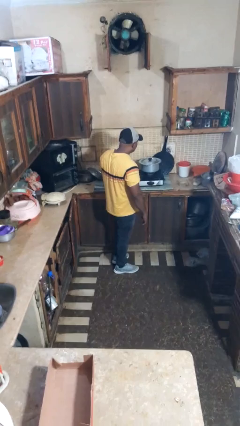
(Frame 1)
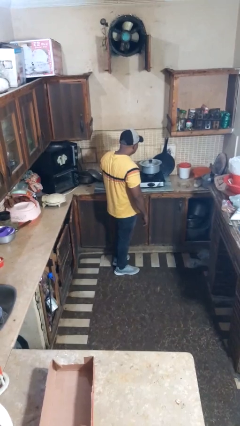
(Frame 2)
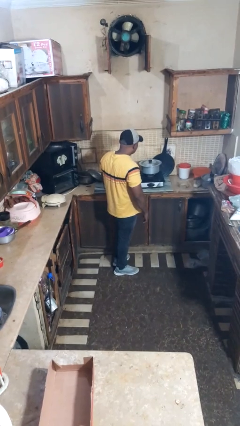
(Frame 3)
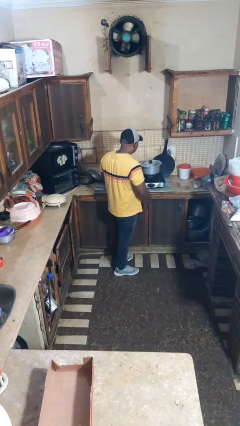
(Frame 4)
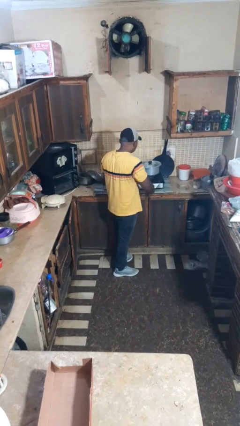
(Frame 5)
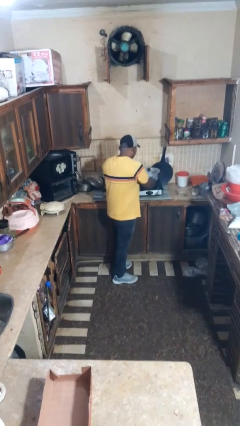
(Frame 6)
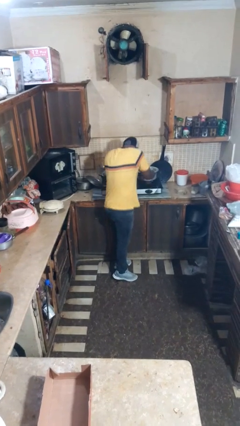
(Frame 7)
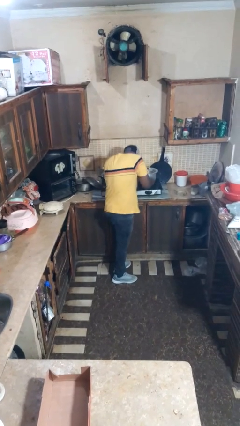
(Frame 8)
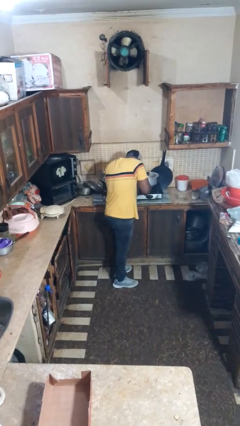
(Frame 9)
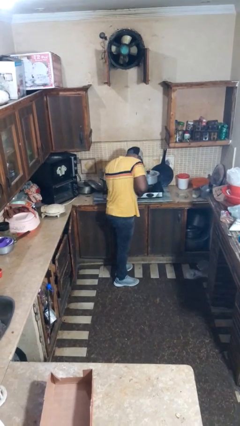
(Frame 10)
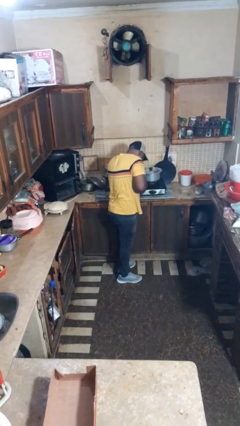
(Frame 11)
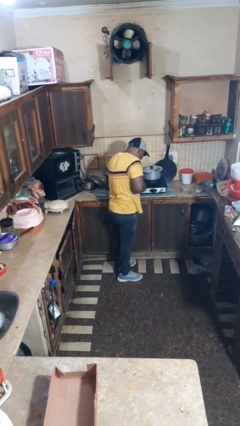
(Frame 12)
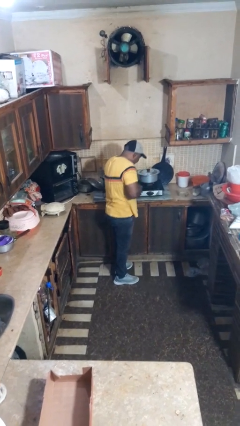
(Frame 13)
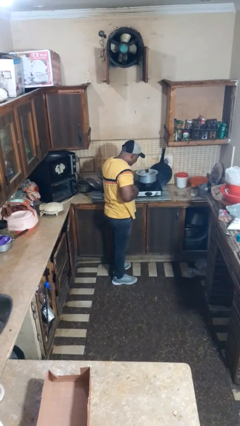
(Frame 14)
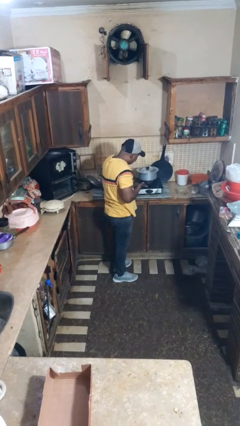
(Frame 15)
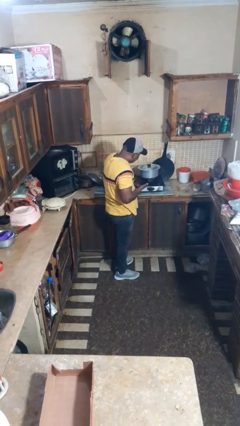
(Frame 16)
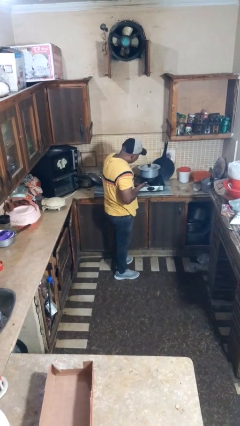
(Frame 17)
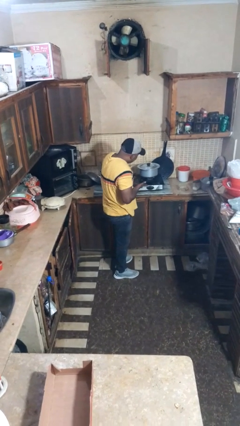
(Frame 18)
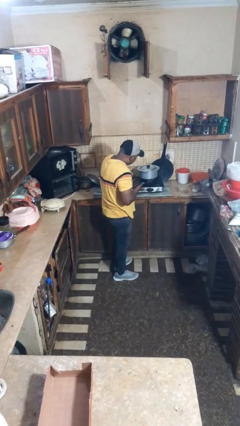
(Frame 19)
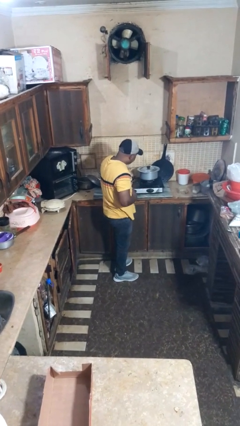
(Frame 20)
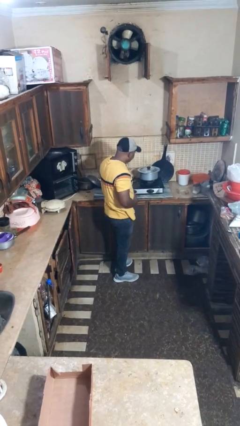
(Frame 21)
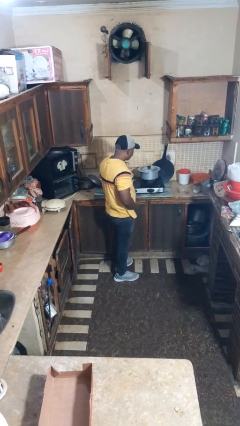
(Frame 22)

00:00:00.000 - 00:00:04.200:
person burns hand

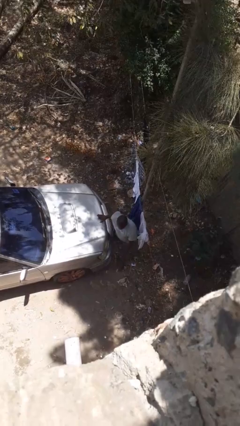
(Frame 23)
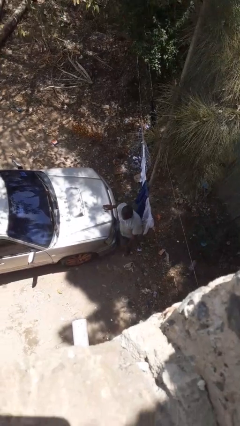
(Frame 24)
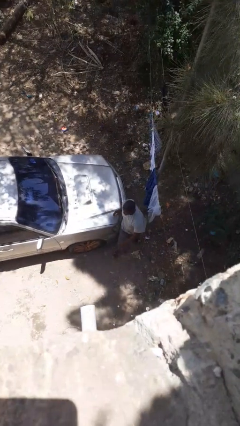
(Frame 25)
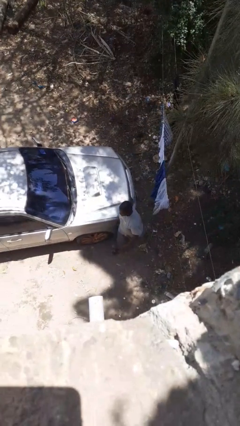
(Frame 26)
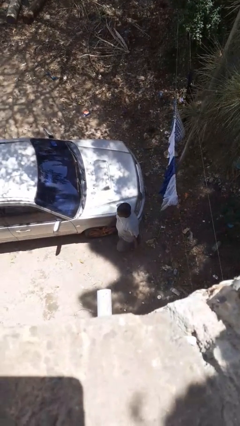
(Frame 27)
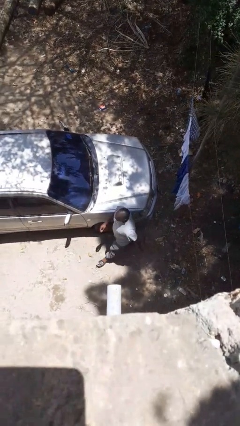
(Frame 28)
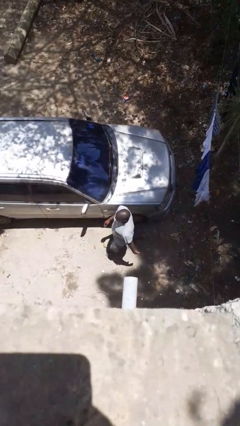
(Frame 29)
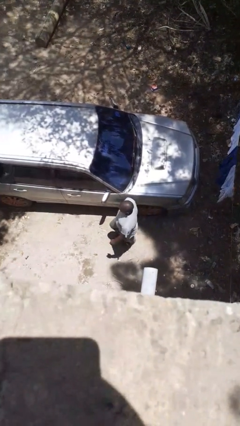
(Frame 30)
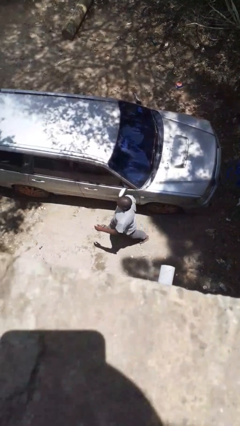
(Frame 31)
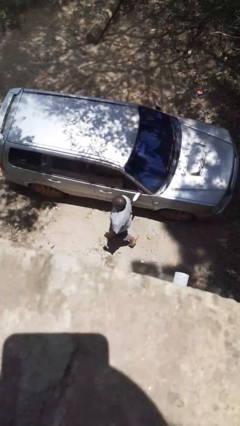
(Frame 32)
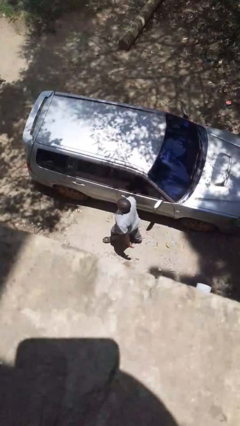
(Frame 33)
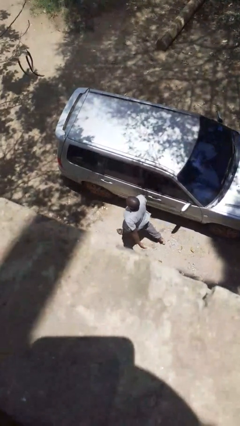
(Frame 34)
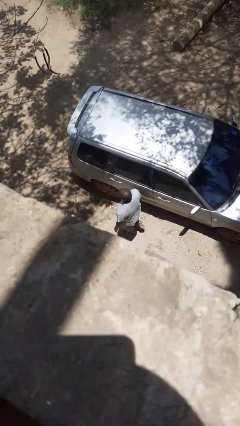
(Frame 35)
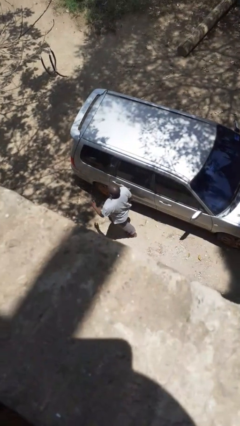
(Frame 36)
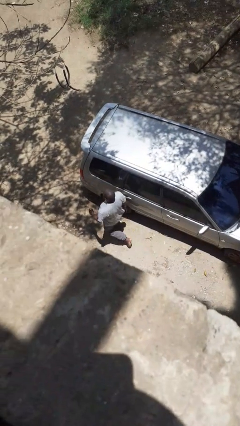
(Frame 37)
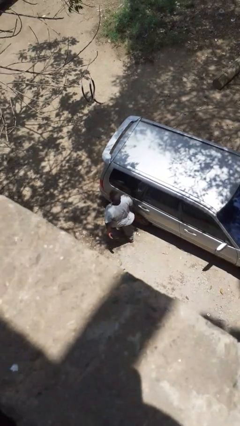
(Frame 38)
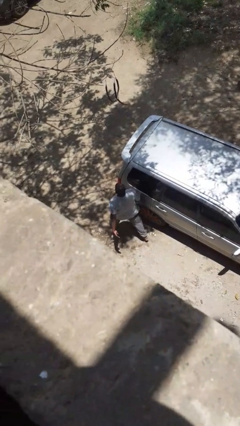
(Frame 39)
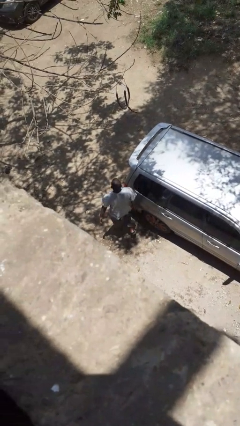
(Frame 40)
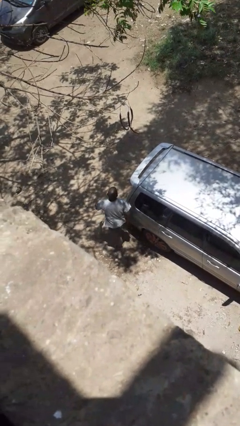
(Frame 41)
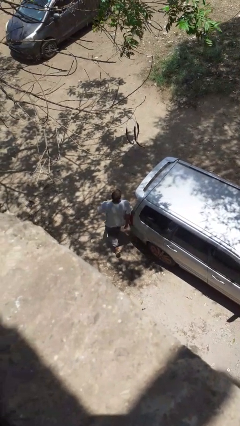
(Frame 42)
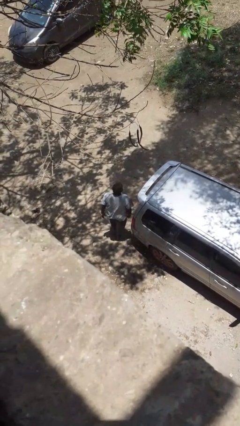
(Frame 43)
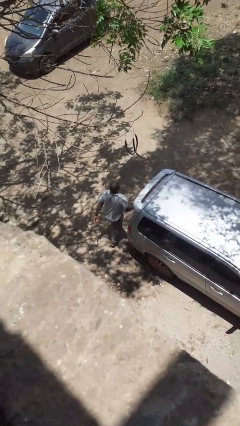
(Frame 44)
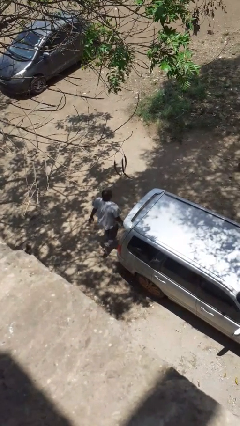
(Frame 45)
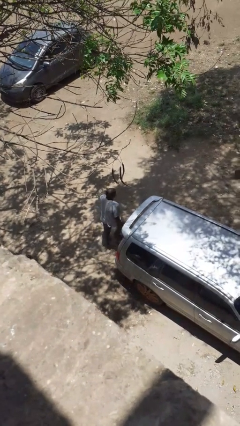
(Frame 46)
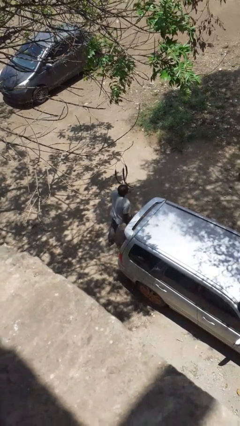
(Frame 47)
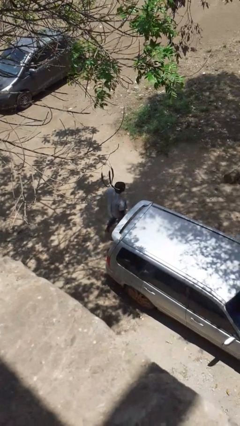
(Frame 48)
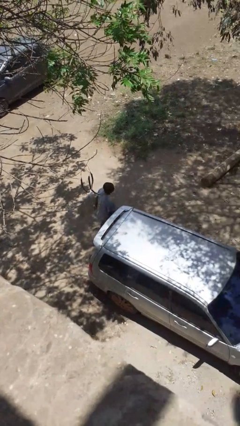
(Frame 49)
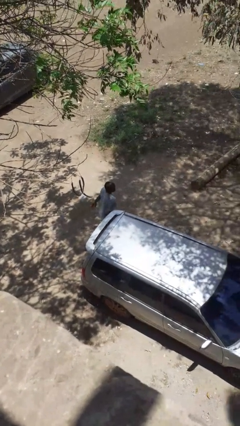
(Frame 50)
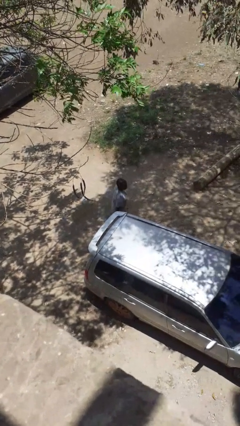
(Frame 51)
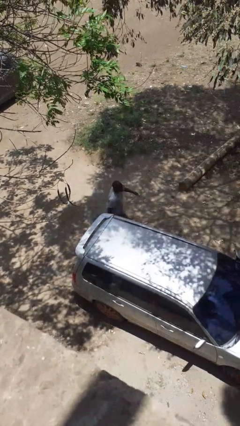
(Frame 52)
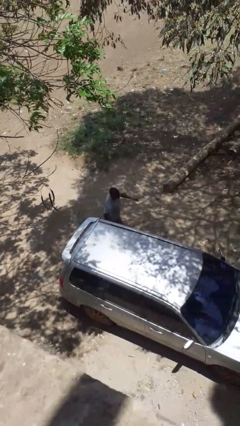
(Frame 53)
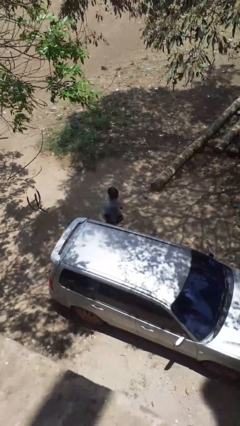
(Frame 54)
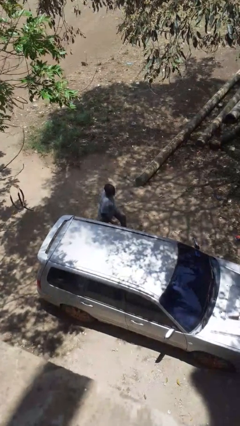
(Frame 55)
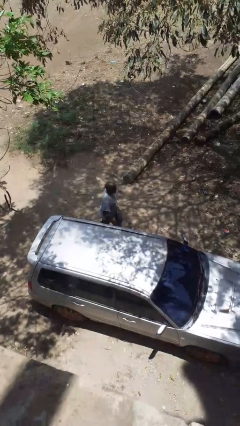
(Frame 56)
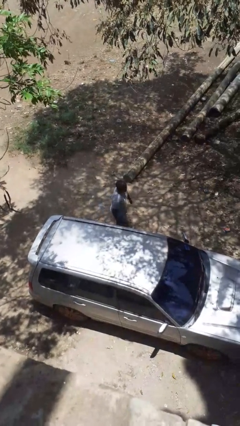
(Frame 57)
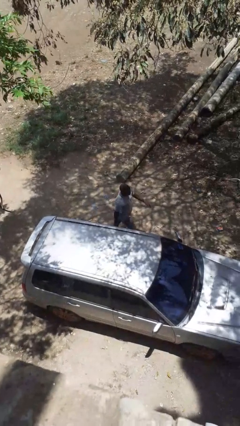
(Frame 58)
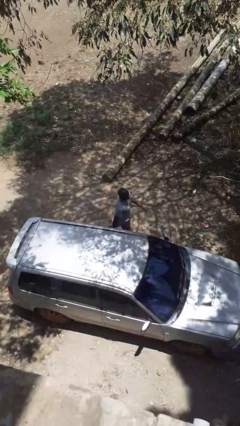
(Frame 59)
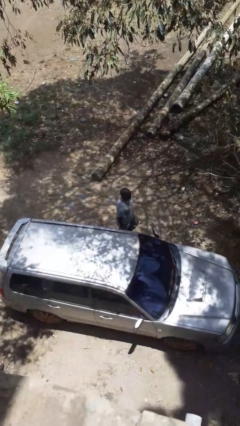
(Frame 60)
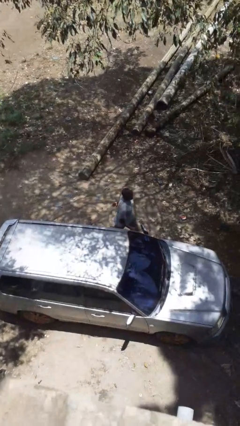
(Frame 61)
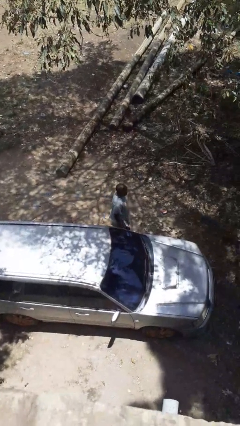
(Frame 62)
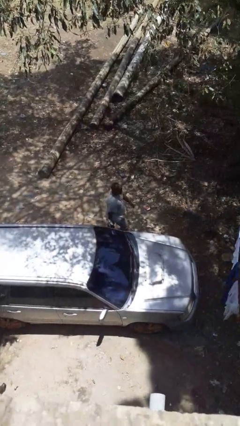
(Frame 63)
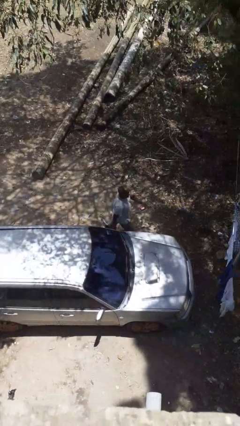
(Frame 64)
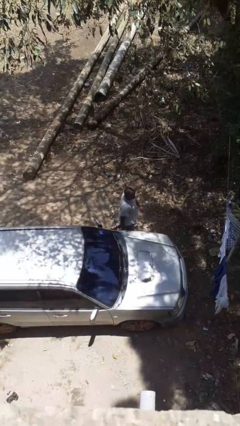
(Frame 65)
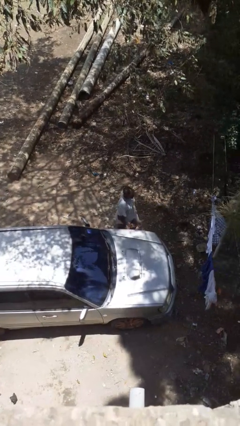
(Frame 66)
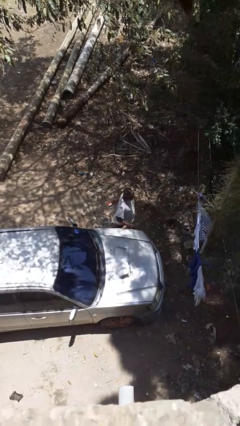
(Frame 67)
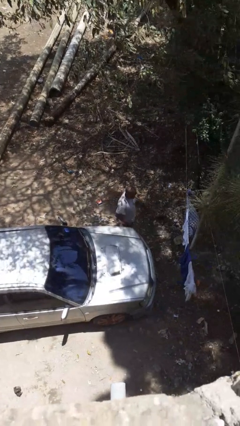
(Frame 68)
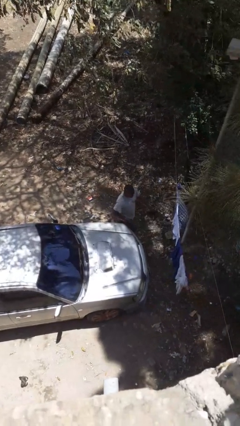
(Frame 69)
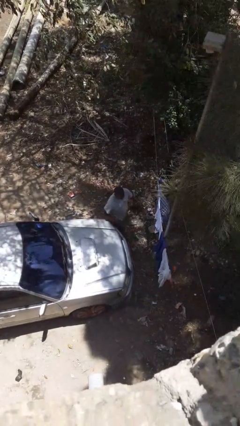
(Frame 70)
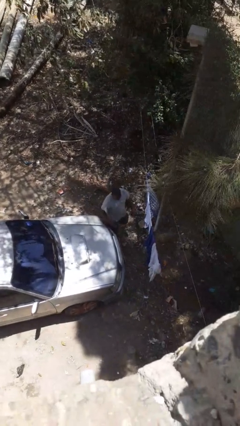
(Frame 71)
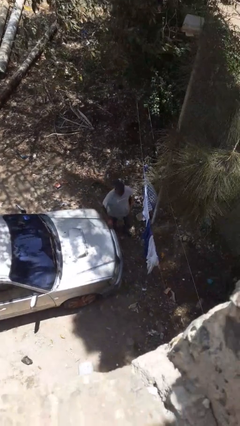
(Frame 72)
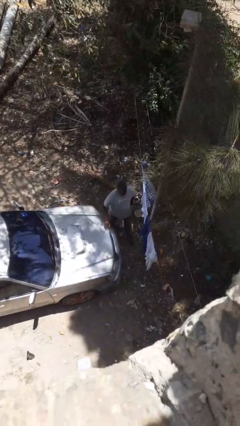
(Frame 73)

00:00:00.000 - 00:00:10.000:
person walks around car

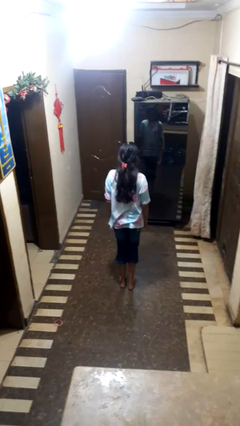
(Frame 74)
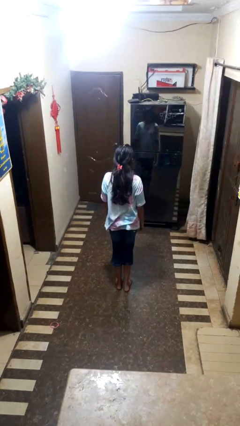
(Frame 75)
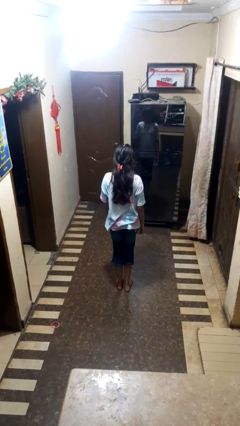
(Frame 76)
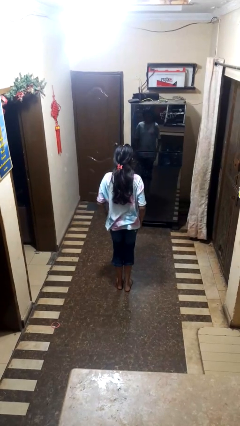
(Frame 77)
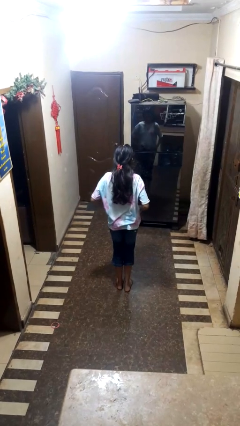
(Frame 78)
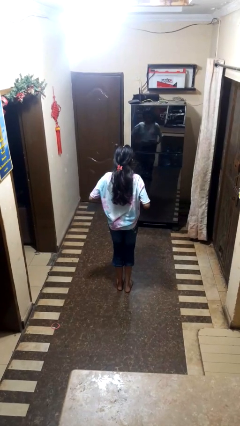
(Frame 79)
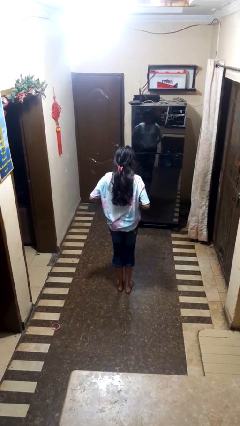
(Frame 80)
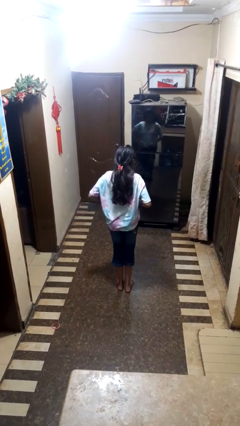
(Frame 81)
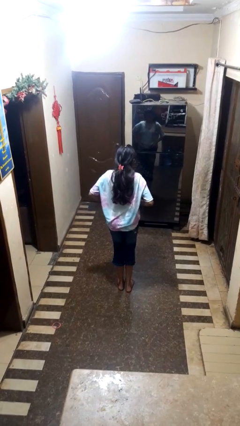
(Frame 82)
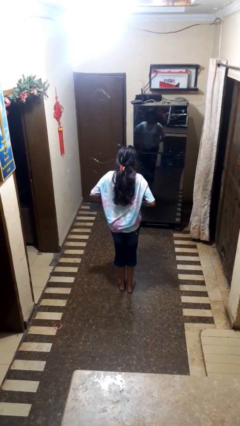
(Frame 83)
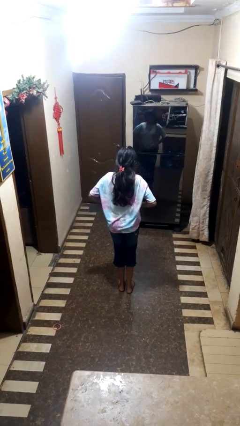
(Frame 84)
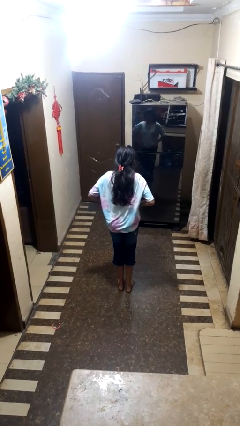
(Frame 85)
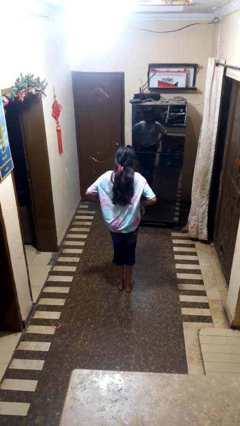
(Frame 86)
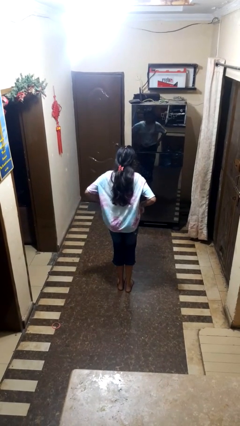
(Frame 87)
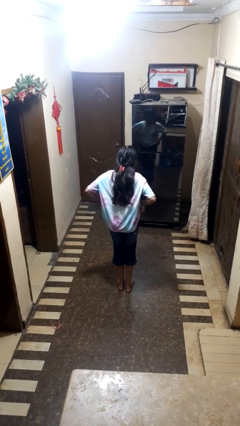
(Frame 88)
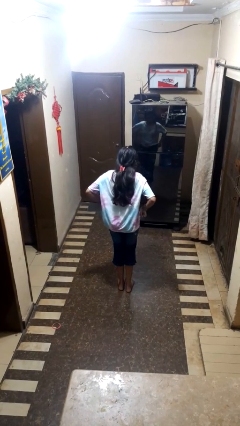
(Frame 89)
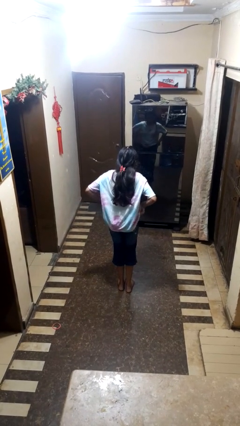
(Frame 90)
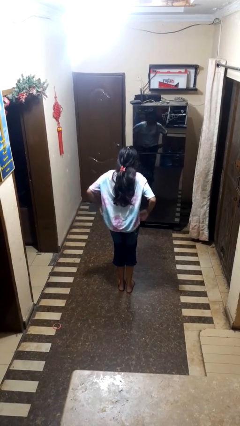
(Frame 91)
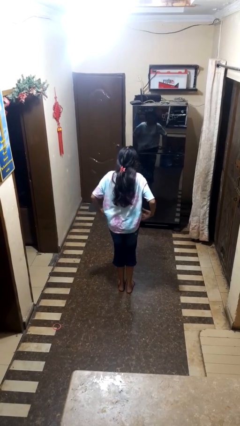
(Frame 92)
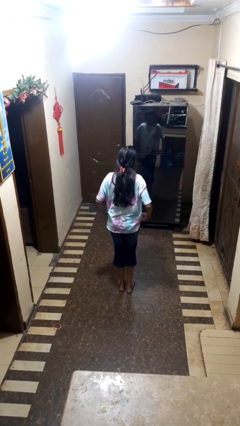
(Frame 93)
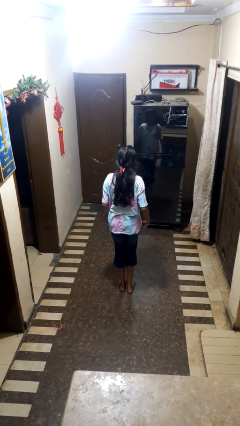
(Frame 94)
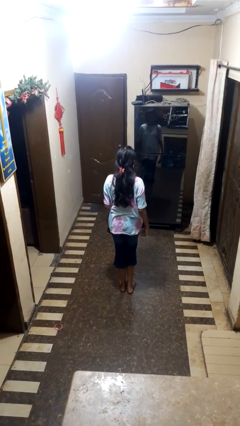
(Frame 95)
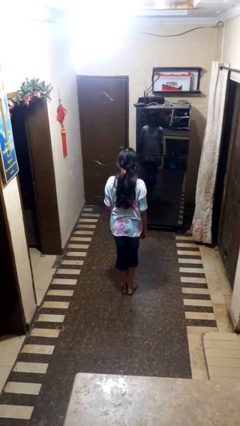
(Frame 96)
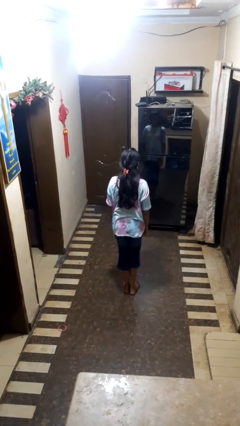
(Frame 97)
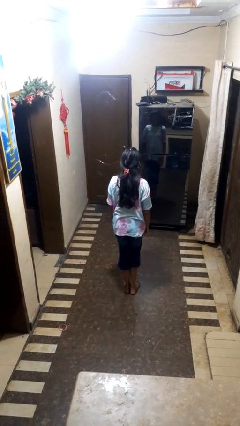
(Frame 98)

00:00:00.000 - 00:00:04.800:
person hikes up pants
